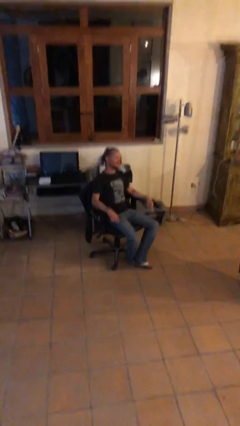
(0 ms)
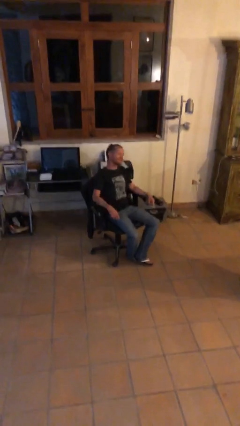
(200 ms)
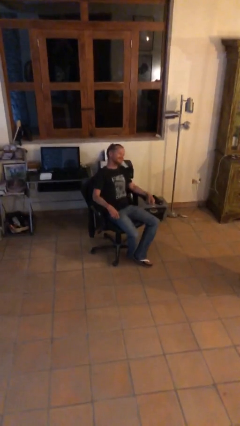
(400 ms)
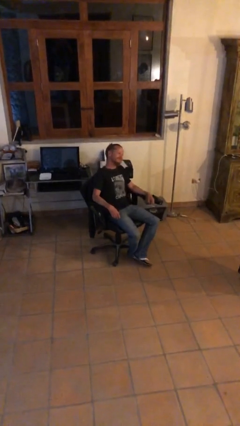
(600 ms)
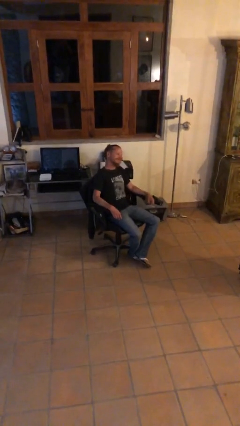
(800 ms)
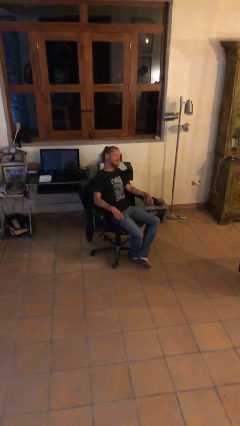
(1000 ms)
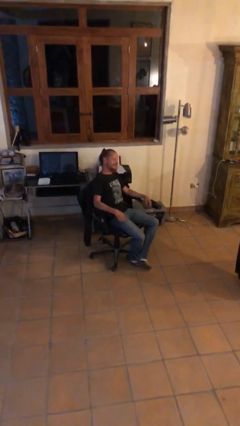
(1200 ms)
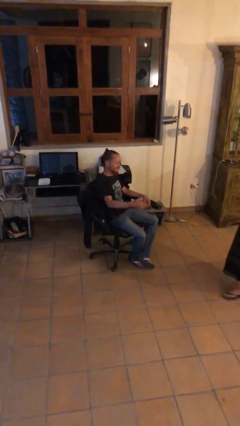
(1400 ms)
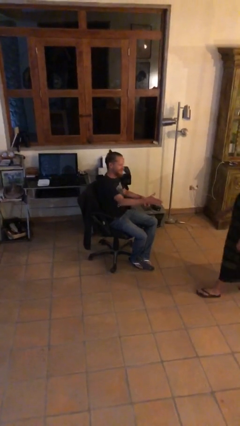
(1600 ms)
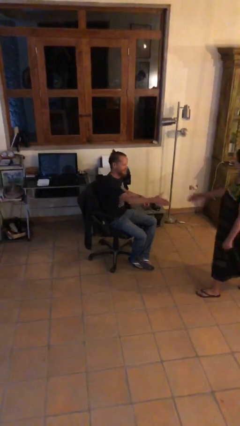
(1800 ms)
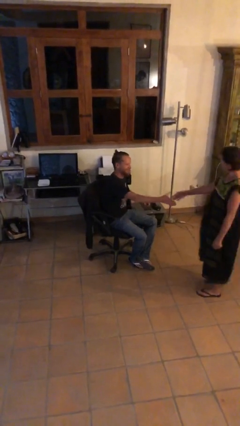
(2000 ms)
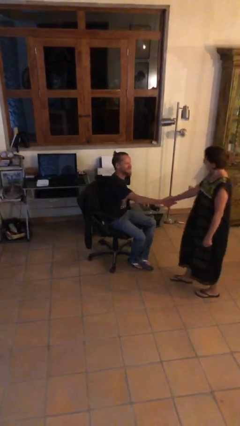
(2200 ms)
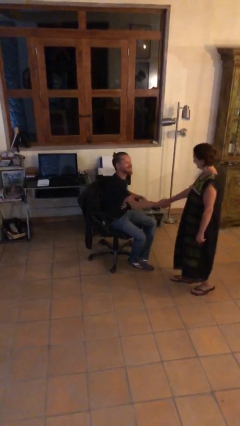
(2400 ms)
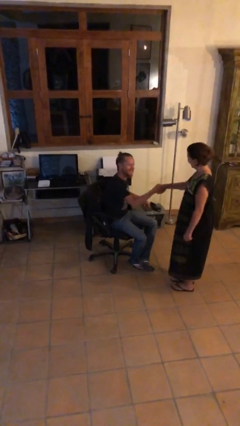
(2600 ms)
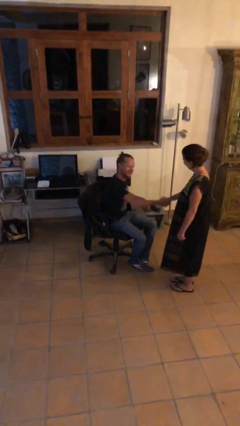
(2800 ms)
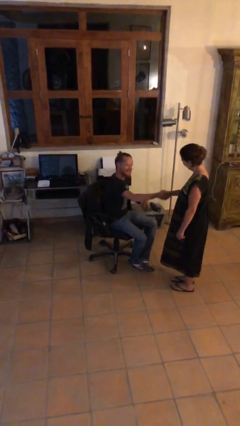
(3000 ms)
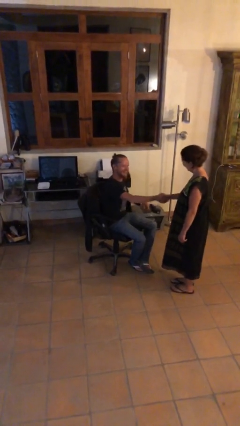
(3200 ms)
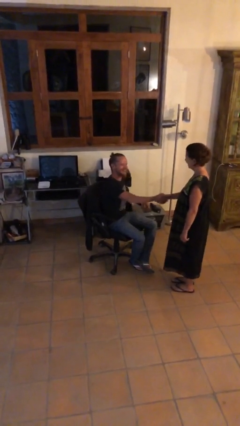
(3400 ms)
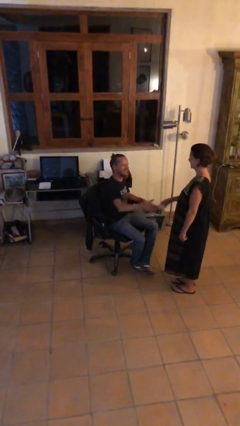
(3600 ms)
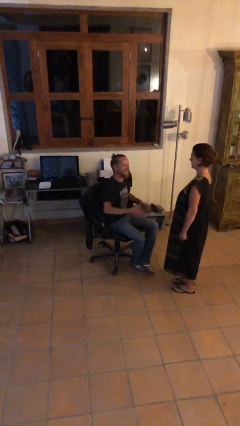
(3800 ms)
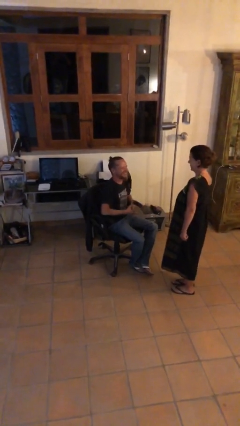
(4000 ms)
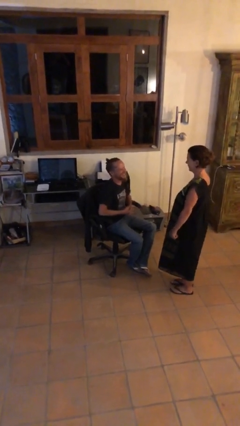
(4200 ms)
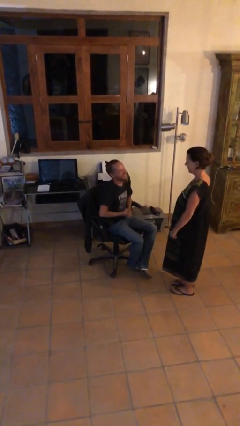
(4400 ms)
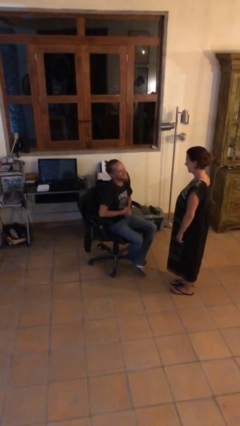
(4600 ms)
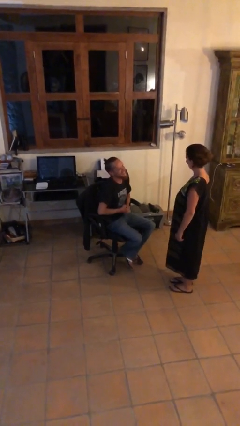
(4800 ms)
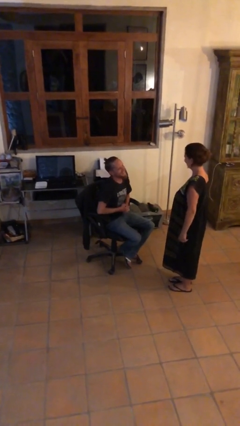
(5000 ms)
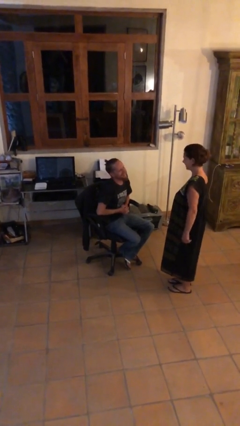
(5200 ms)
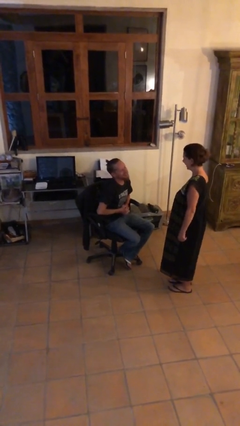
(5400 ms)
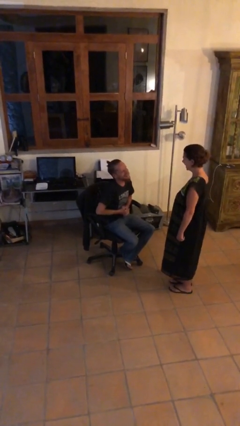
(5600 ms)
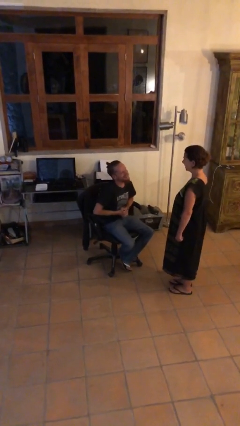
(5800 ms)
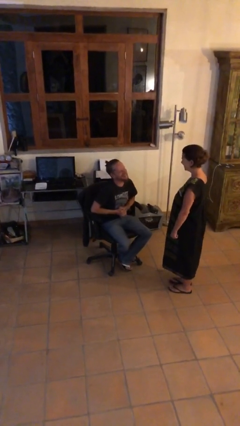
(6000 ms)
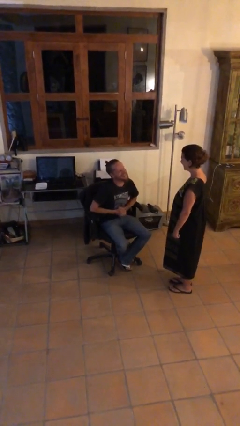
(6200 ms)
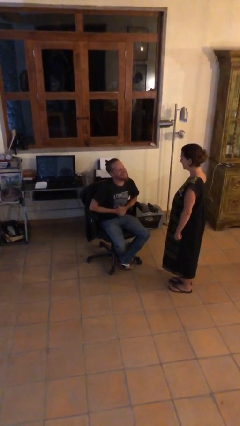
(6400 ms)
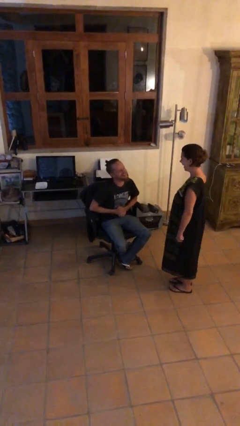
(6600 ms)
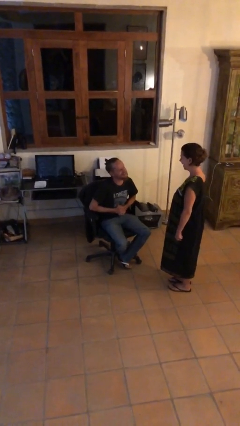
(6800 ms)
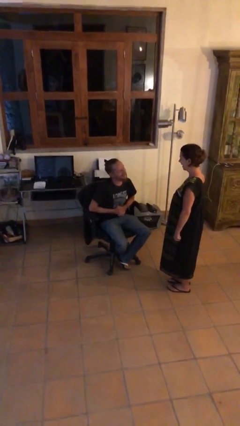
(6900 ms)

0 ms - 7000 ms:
person shakes hand

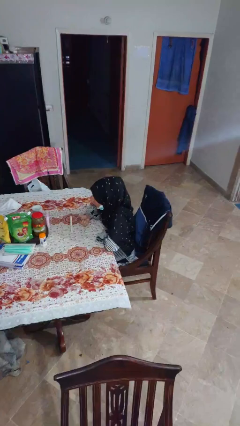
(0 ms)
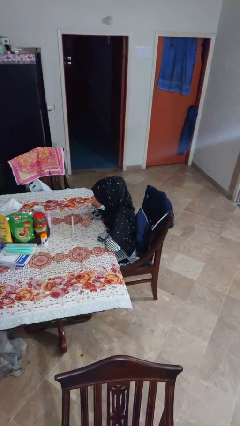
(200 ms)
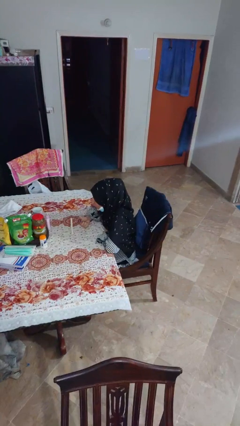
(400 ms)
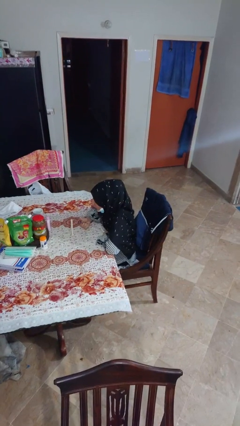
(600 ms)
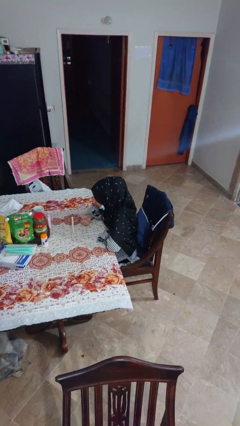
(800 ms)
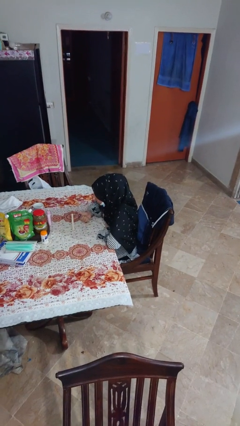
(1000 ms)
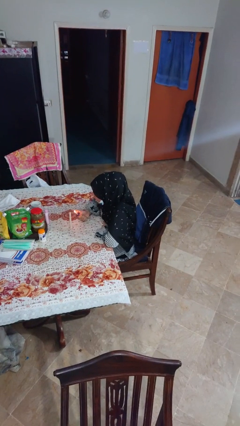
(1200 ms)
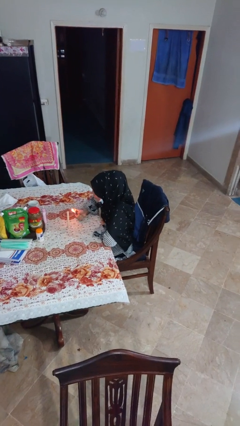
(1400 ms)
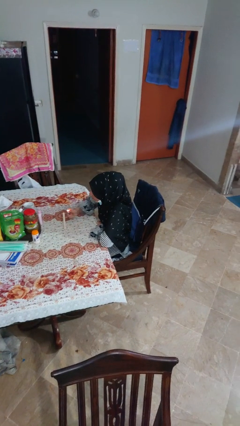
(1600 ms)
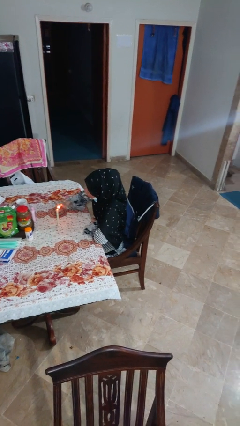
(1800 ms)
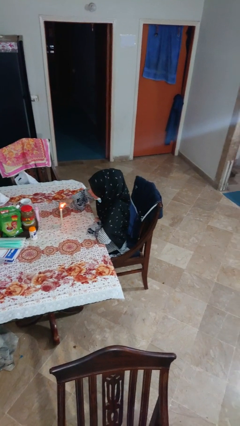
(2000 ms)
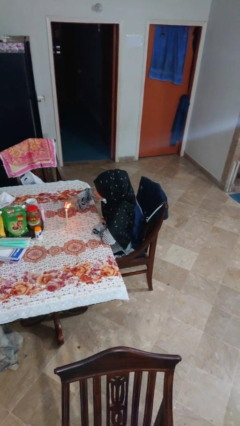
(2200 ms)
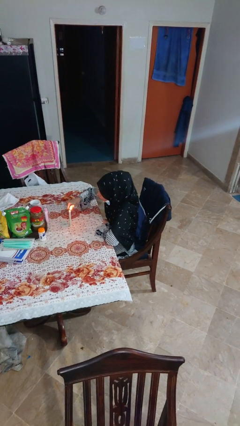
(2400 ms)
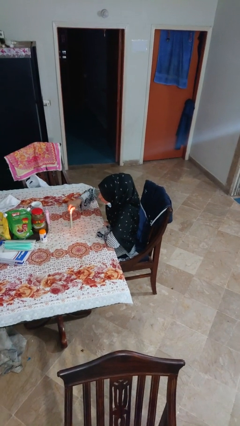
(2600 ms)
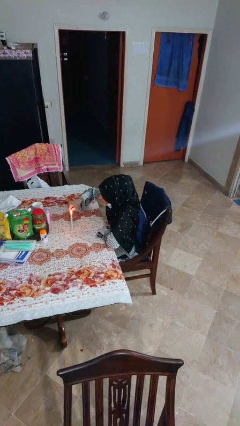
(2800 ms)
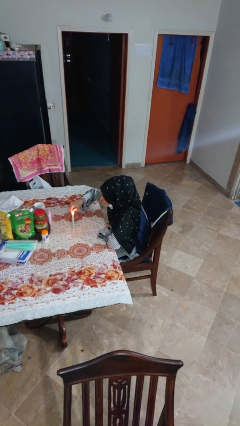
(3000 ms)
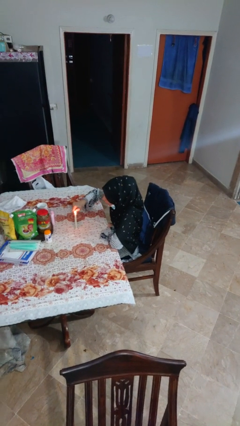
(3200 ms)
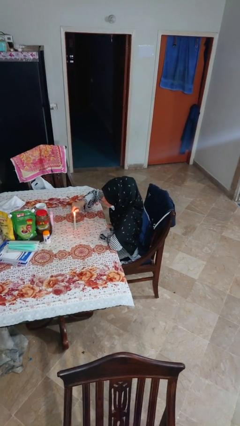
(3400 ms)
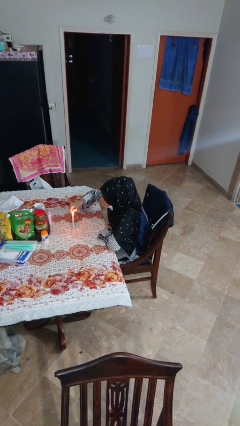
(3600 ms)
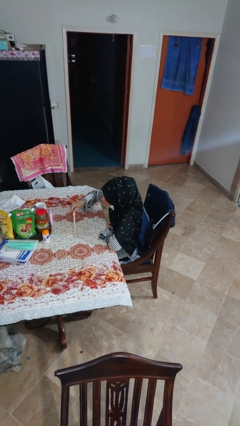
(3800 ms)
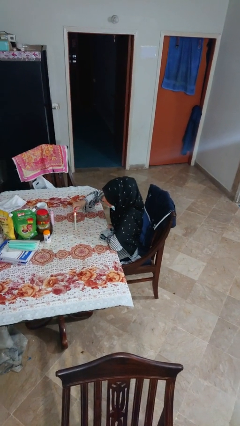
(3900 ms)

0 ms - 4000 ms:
person lights candle

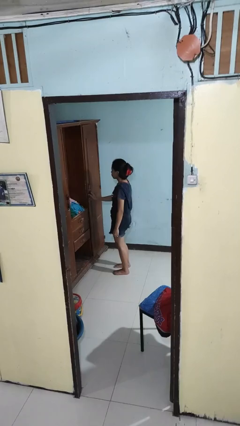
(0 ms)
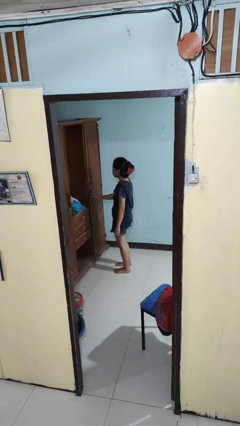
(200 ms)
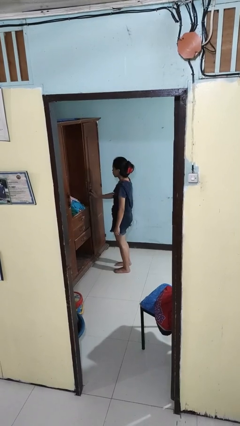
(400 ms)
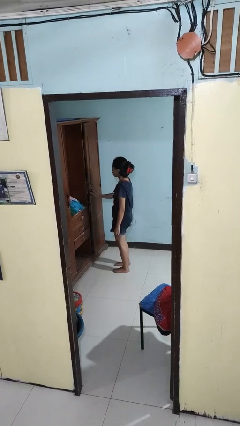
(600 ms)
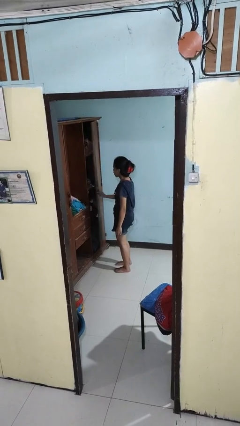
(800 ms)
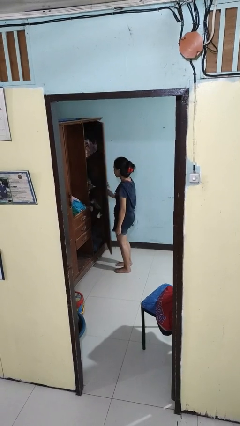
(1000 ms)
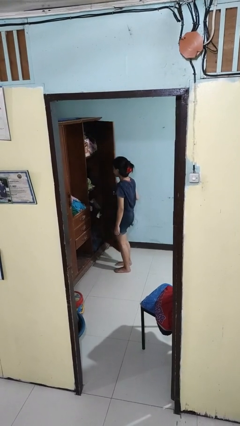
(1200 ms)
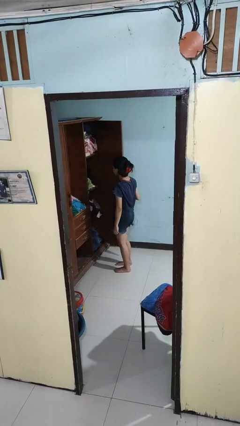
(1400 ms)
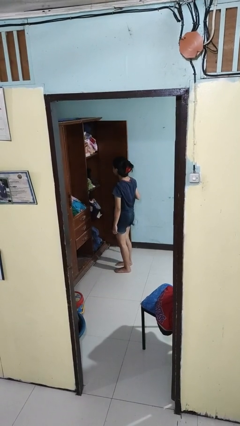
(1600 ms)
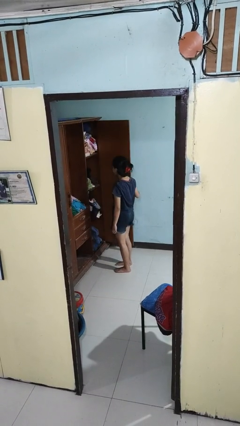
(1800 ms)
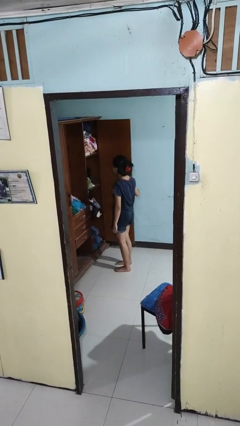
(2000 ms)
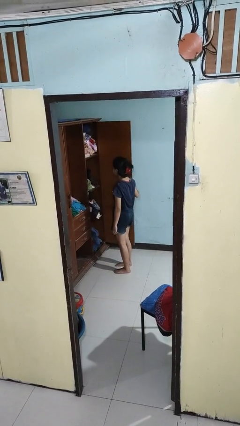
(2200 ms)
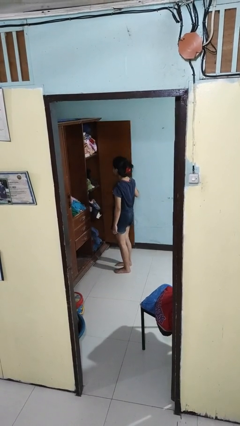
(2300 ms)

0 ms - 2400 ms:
person opens closet door

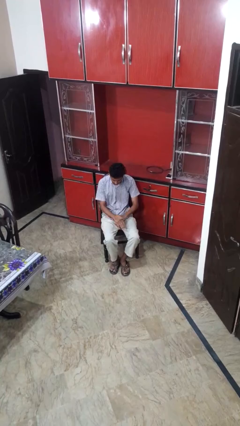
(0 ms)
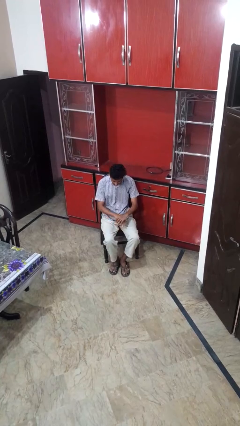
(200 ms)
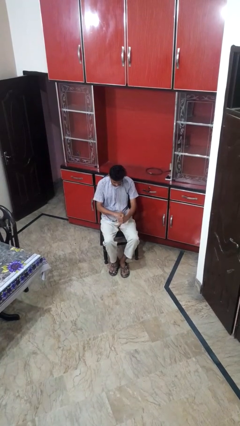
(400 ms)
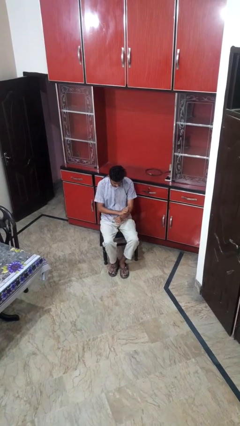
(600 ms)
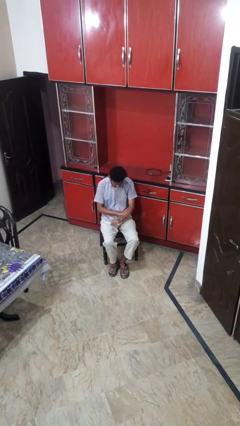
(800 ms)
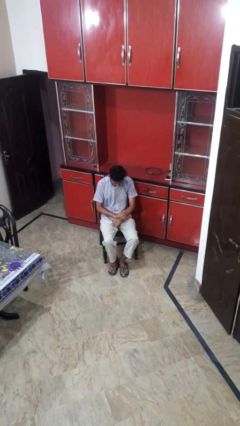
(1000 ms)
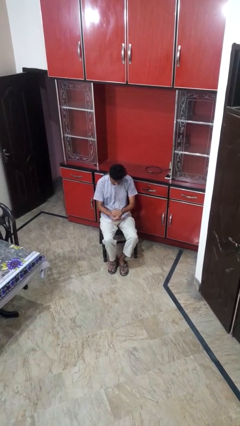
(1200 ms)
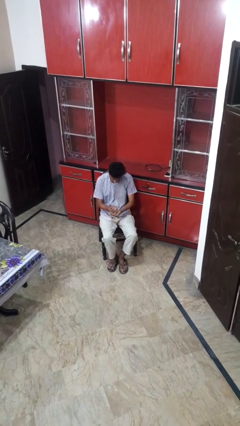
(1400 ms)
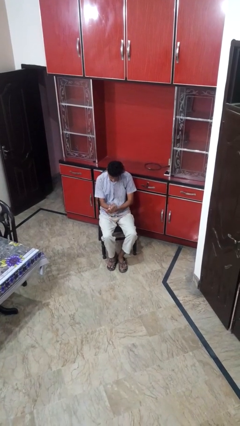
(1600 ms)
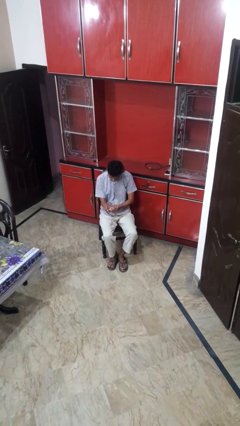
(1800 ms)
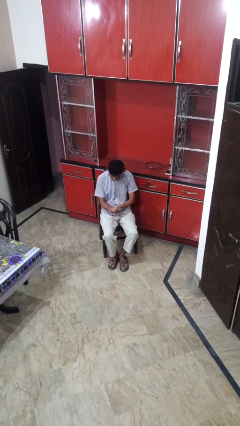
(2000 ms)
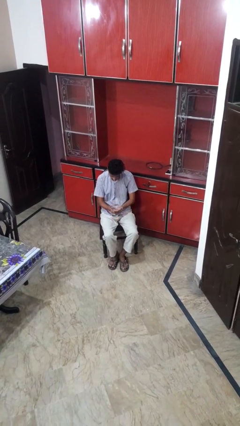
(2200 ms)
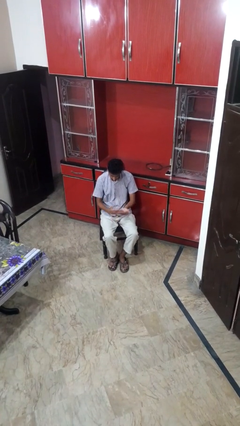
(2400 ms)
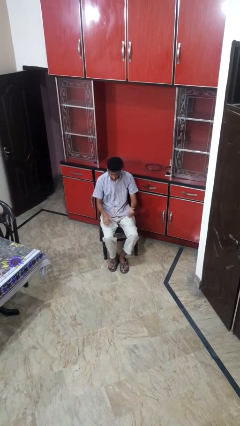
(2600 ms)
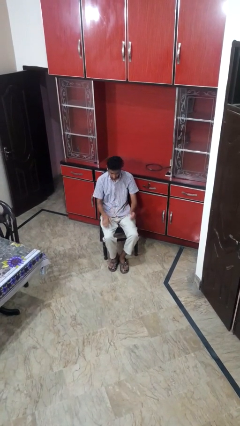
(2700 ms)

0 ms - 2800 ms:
person looks at hands in lap

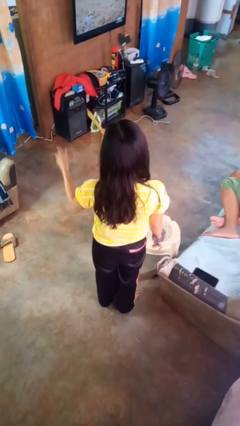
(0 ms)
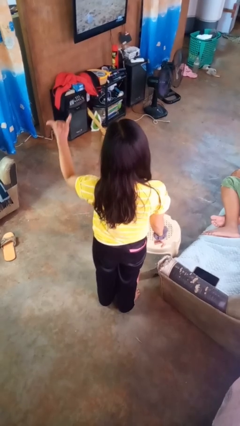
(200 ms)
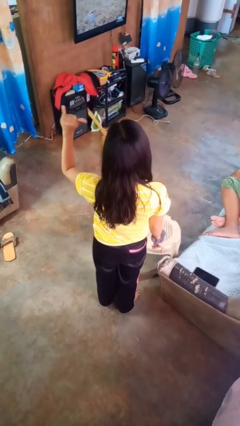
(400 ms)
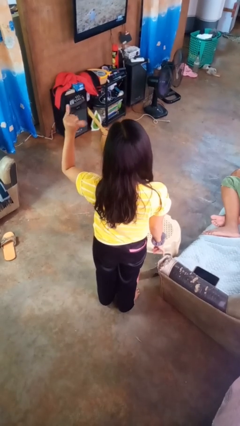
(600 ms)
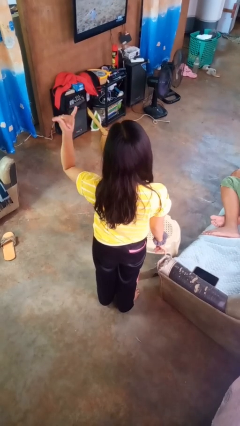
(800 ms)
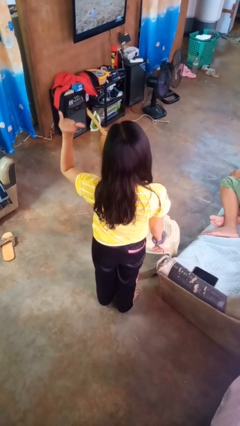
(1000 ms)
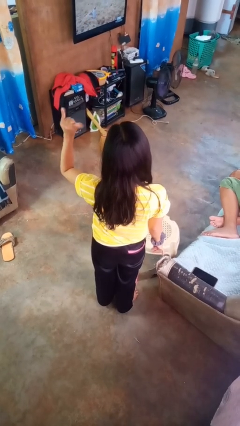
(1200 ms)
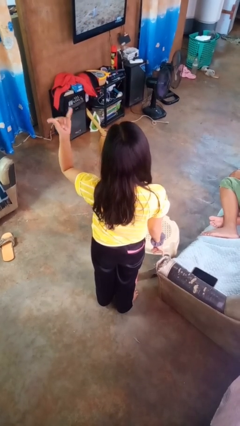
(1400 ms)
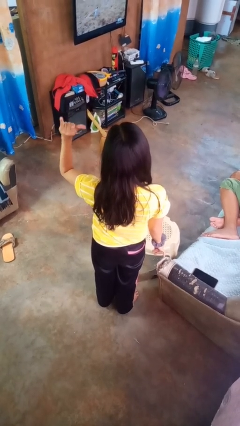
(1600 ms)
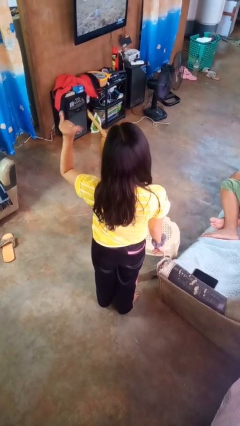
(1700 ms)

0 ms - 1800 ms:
person gestures hang loose
